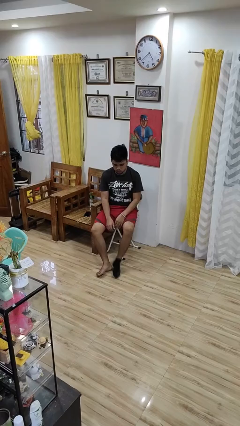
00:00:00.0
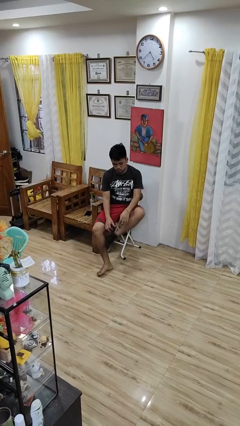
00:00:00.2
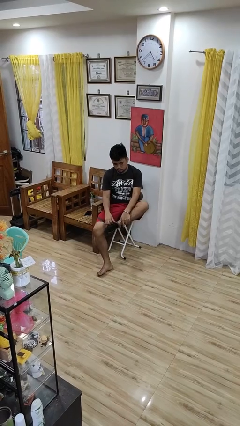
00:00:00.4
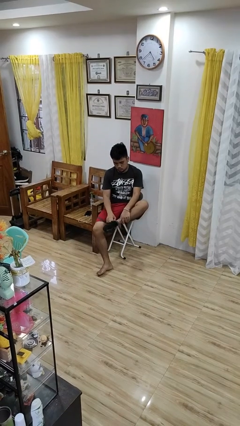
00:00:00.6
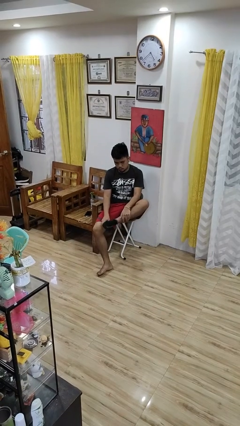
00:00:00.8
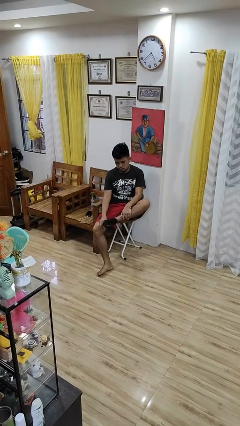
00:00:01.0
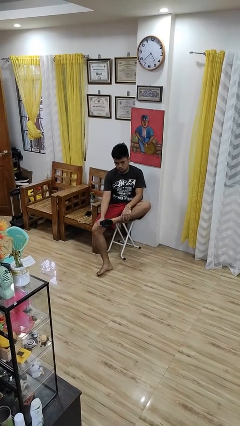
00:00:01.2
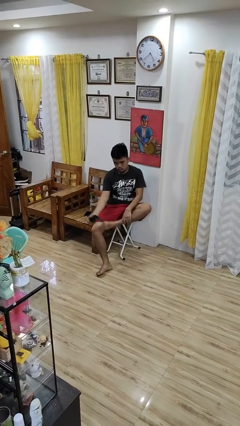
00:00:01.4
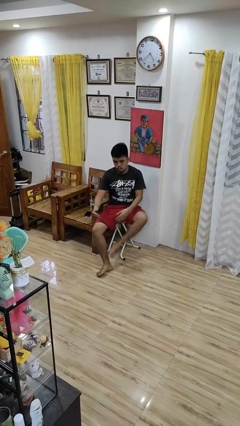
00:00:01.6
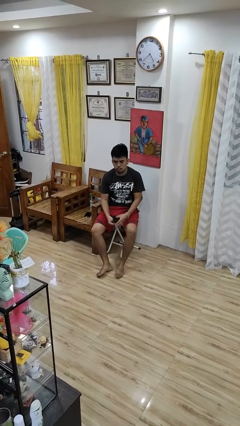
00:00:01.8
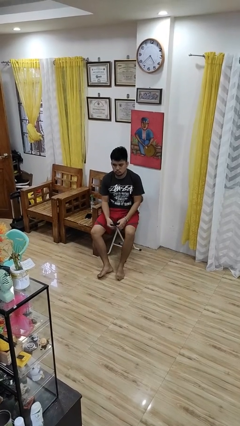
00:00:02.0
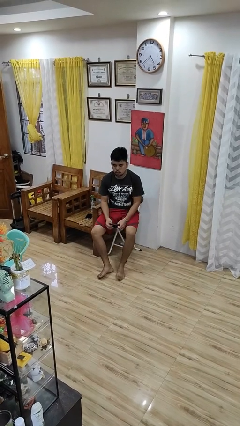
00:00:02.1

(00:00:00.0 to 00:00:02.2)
person takes off socks

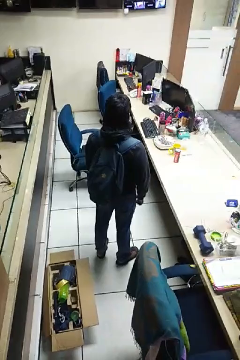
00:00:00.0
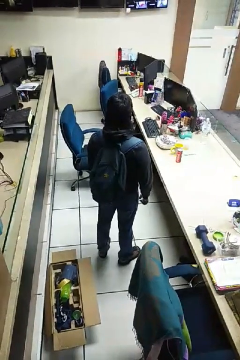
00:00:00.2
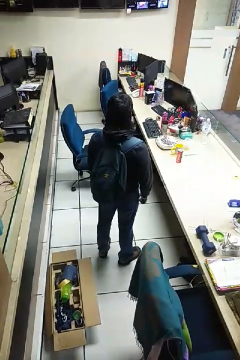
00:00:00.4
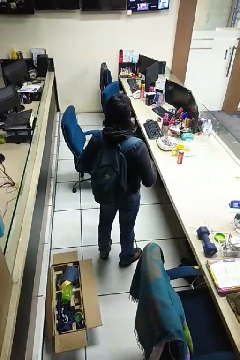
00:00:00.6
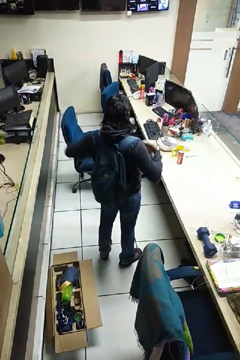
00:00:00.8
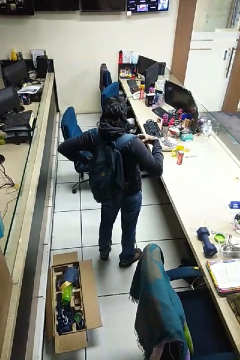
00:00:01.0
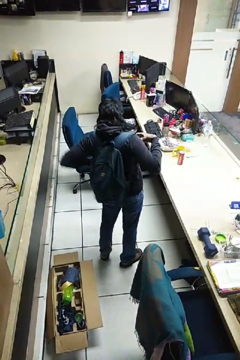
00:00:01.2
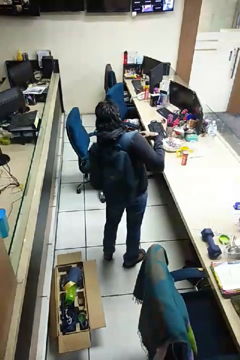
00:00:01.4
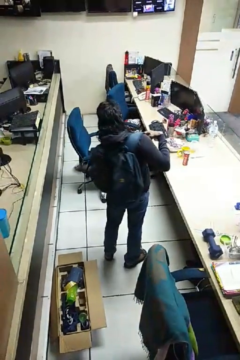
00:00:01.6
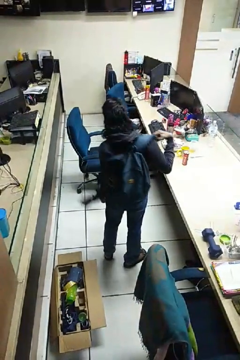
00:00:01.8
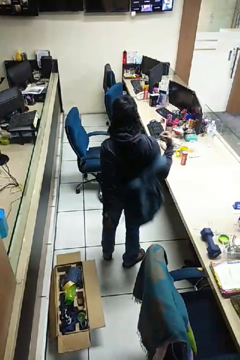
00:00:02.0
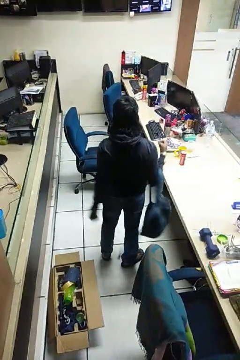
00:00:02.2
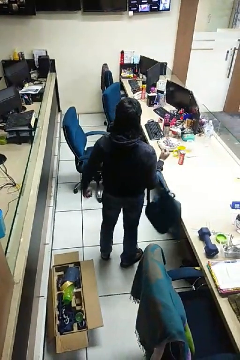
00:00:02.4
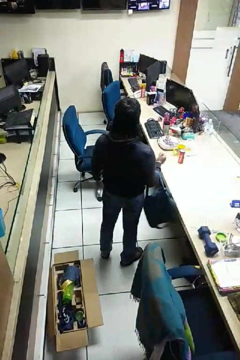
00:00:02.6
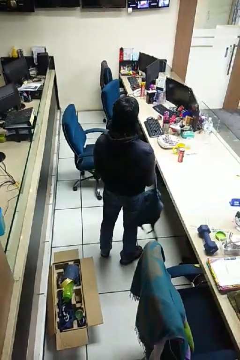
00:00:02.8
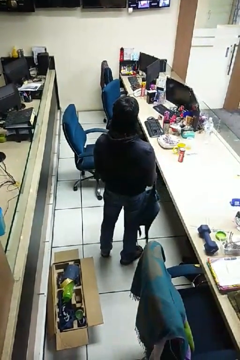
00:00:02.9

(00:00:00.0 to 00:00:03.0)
person takes off backpack

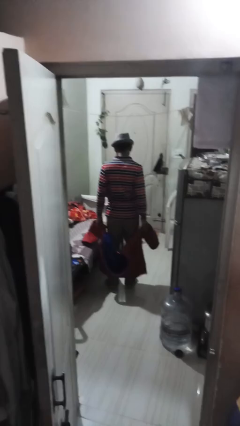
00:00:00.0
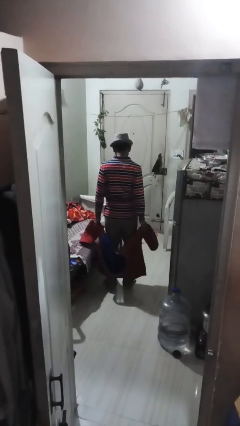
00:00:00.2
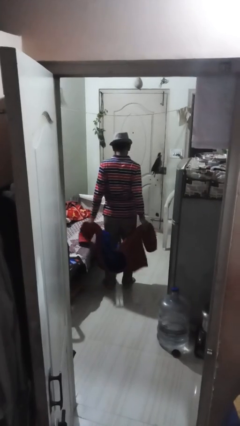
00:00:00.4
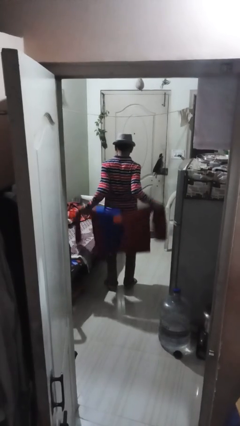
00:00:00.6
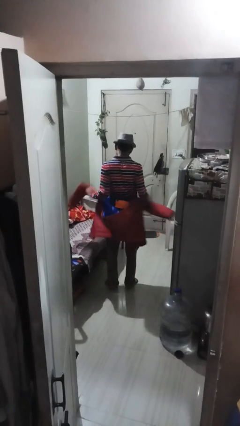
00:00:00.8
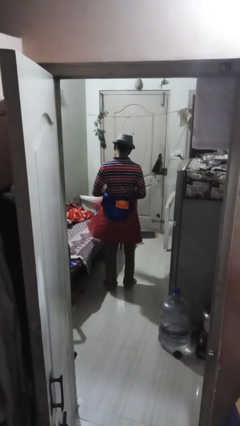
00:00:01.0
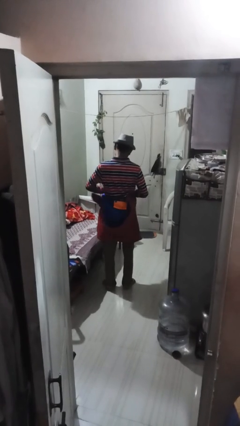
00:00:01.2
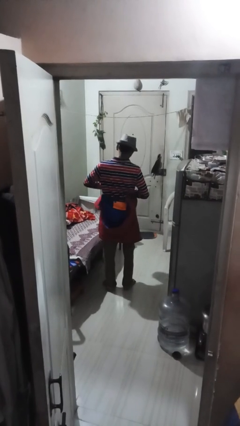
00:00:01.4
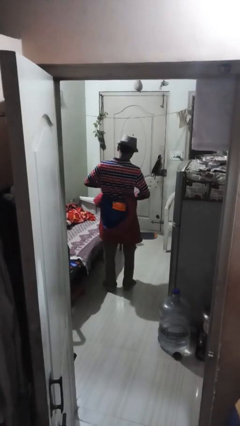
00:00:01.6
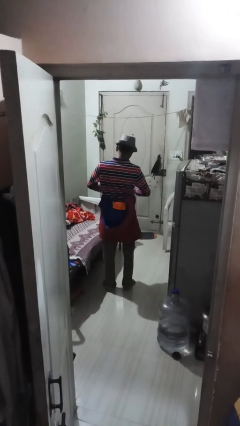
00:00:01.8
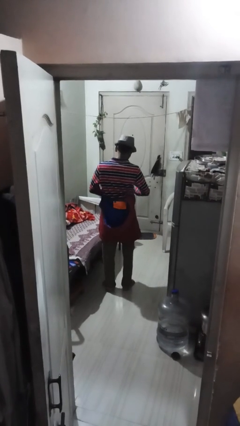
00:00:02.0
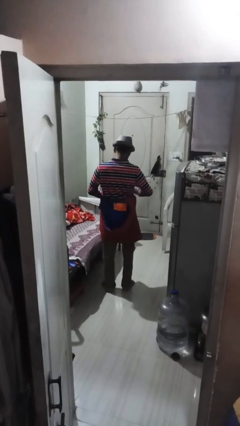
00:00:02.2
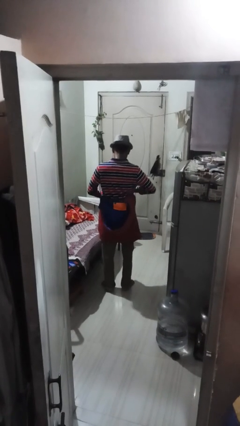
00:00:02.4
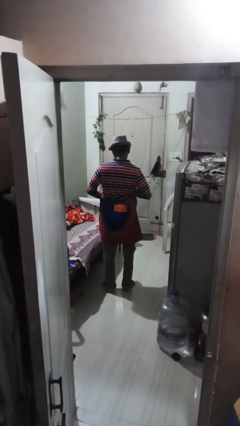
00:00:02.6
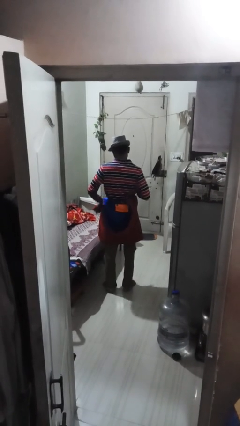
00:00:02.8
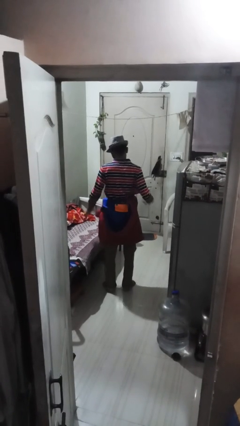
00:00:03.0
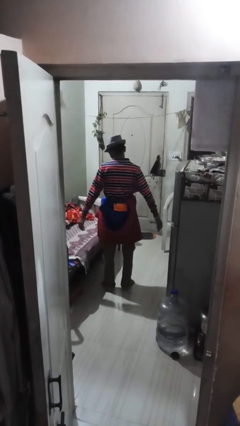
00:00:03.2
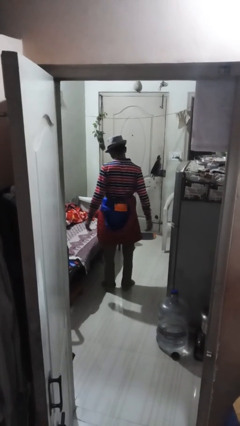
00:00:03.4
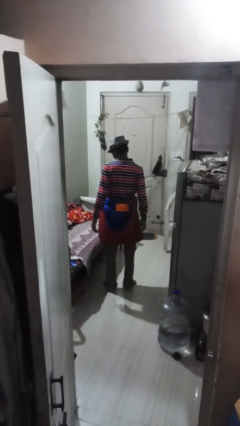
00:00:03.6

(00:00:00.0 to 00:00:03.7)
person ties jacket around waist

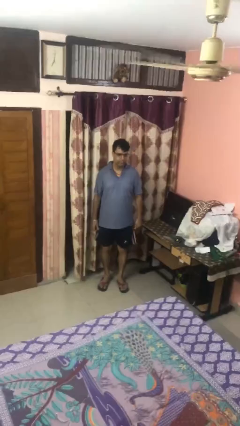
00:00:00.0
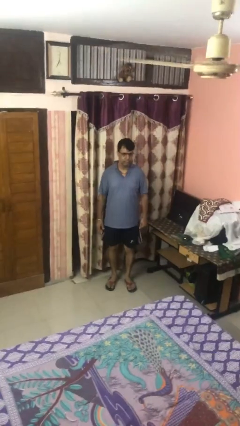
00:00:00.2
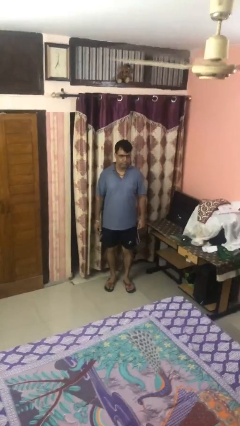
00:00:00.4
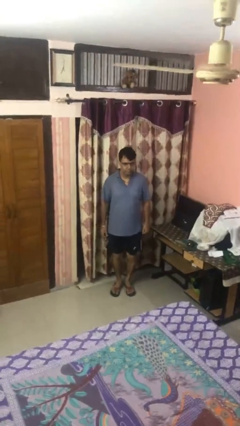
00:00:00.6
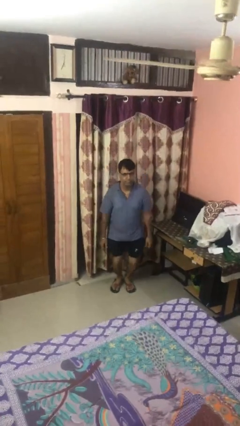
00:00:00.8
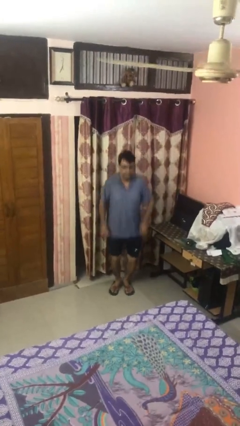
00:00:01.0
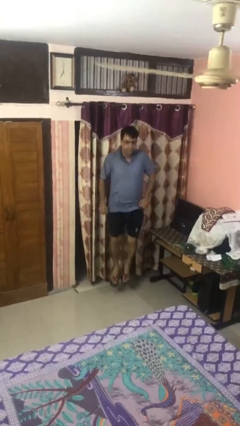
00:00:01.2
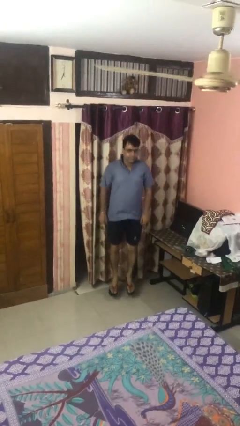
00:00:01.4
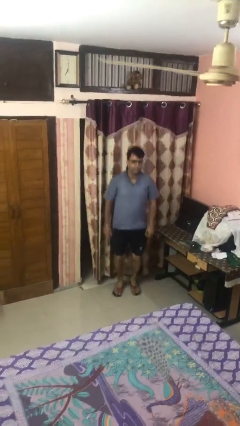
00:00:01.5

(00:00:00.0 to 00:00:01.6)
person jumps

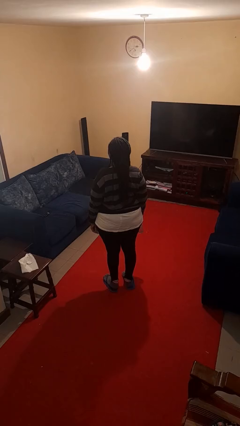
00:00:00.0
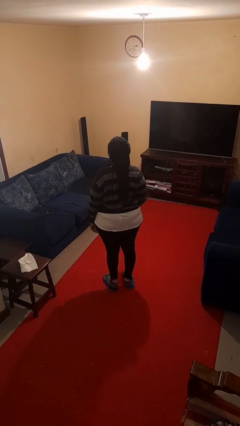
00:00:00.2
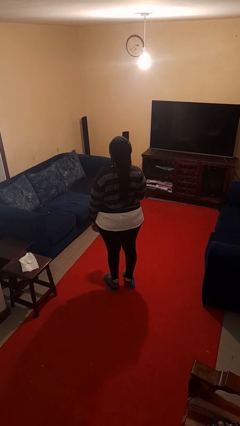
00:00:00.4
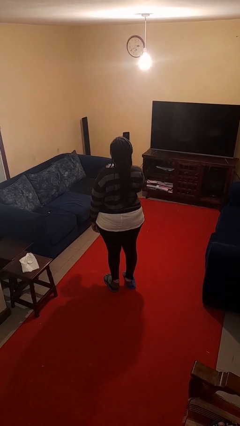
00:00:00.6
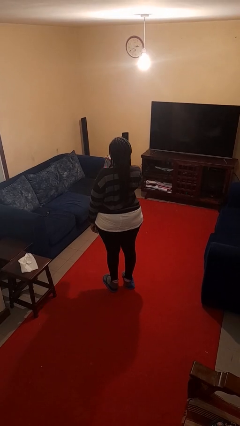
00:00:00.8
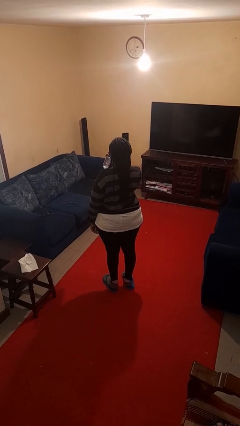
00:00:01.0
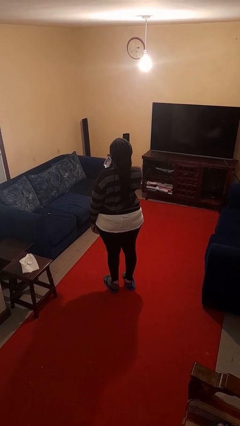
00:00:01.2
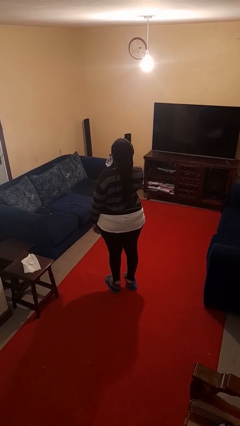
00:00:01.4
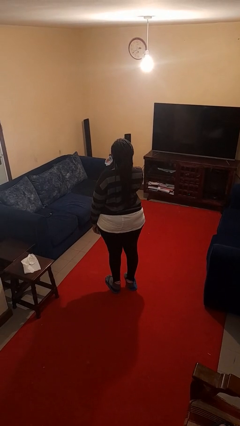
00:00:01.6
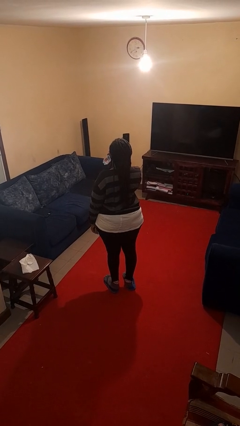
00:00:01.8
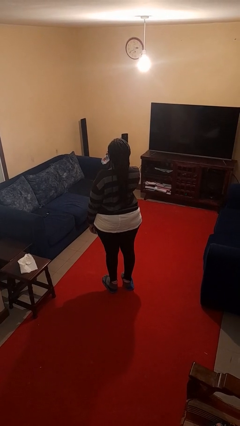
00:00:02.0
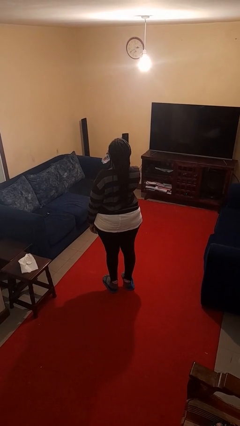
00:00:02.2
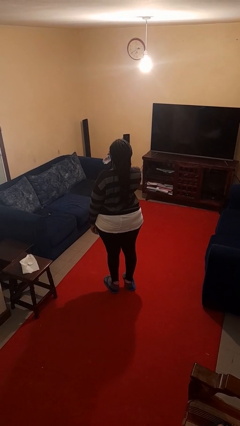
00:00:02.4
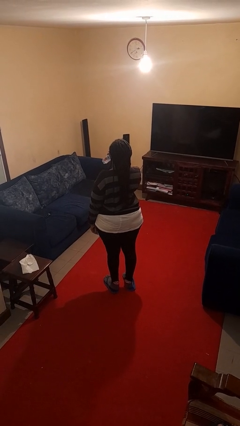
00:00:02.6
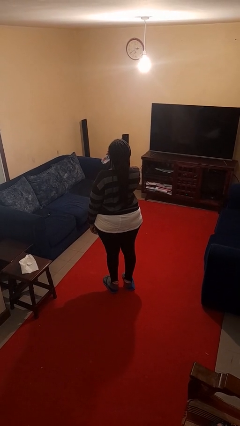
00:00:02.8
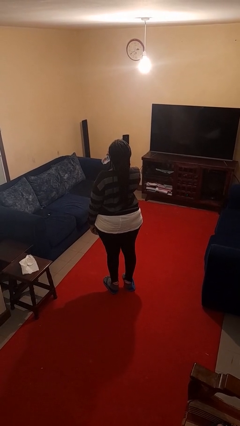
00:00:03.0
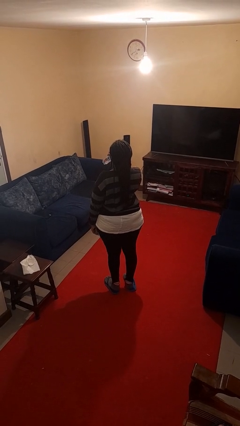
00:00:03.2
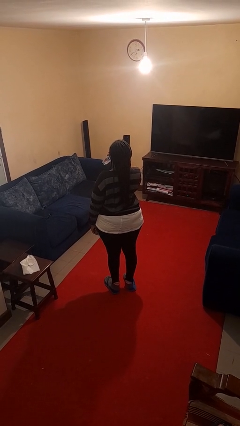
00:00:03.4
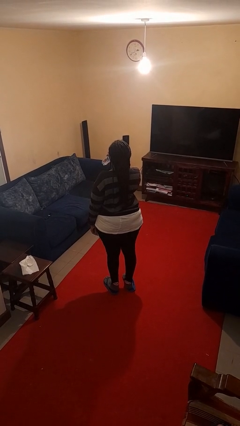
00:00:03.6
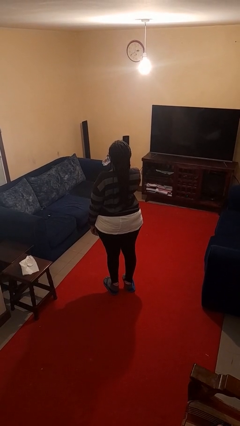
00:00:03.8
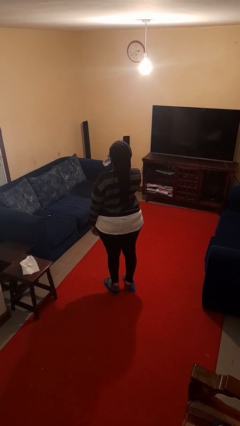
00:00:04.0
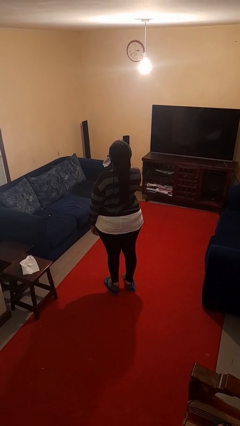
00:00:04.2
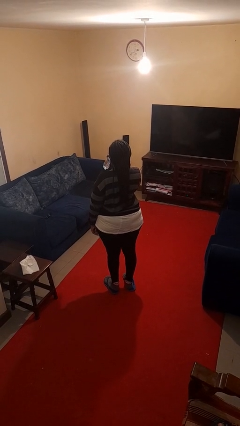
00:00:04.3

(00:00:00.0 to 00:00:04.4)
person drinks from bottle

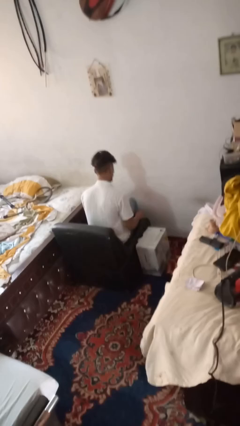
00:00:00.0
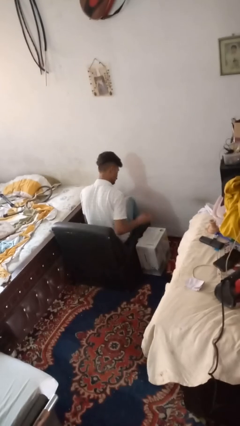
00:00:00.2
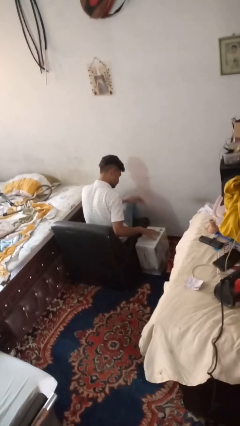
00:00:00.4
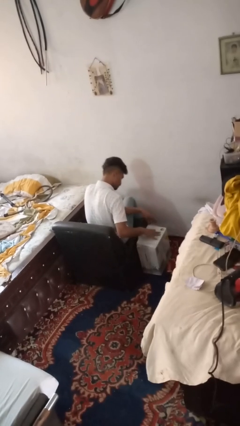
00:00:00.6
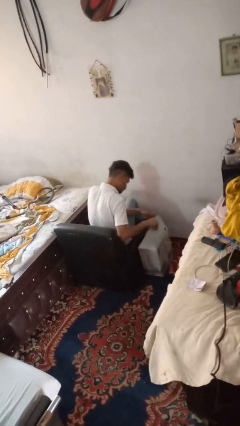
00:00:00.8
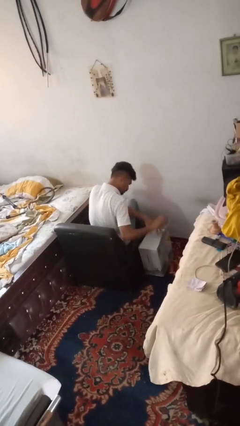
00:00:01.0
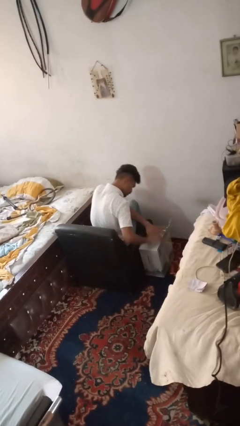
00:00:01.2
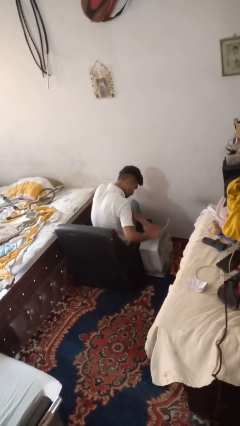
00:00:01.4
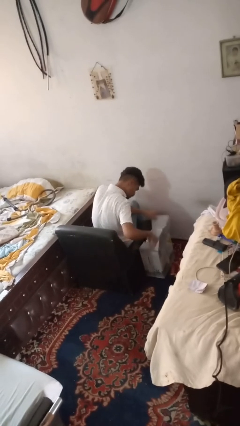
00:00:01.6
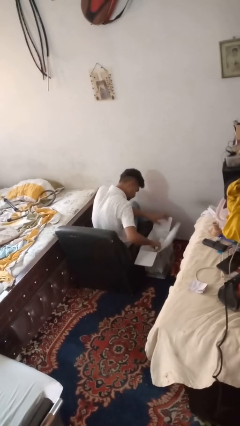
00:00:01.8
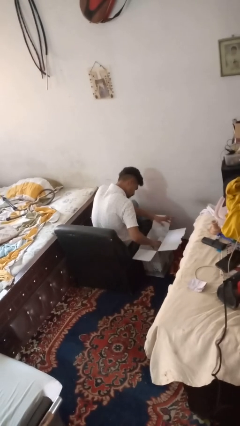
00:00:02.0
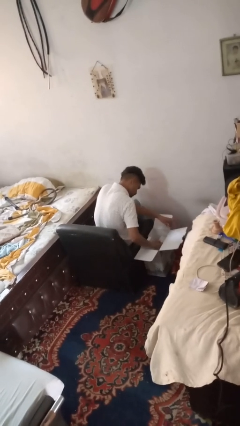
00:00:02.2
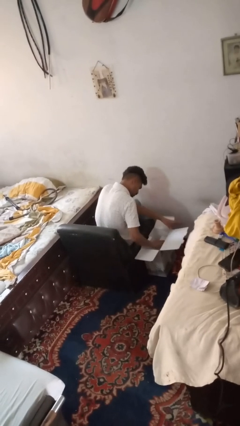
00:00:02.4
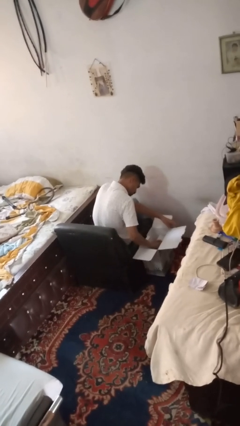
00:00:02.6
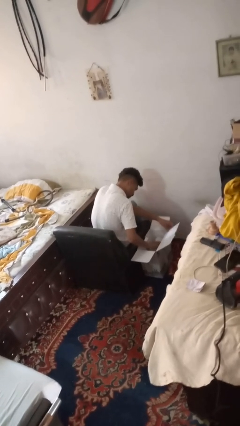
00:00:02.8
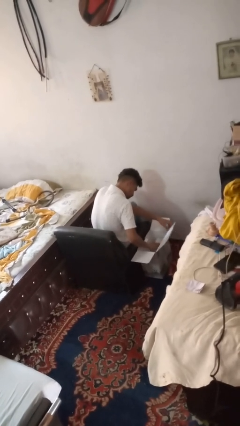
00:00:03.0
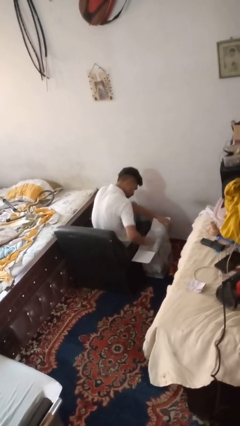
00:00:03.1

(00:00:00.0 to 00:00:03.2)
person searches in box
